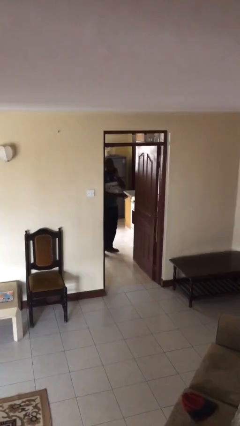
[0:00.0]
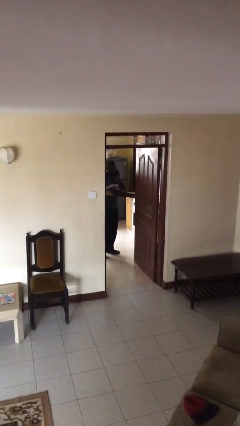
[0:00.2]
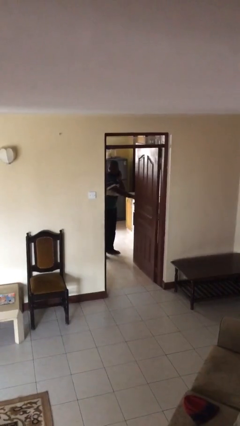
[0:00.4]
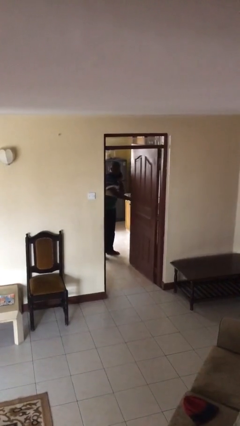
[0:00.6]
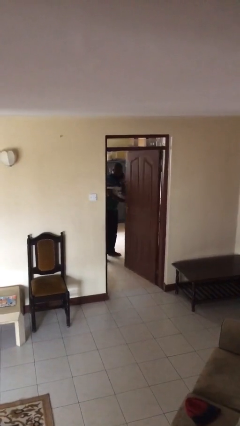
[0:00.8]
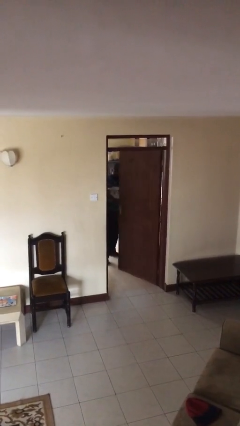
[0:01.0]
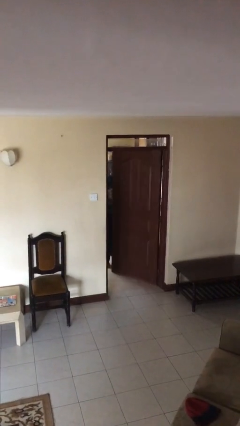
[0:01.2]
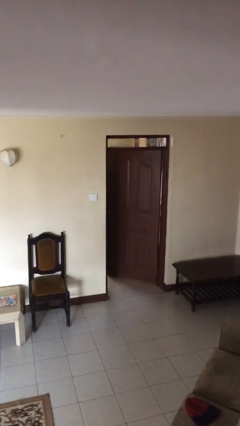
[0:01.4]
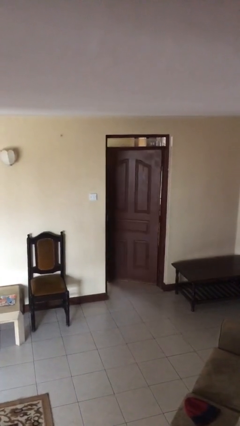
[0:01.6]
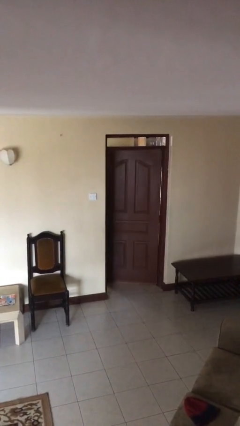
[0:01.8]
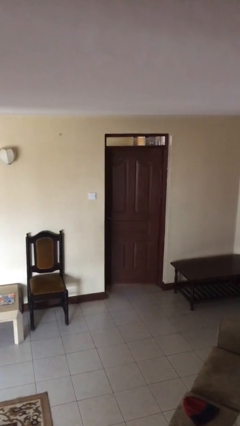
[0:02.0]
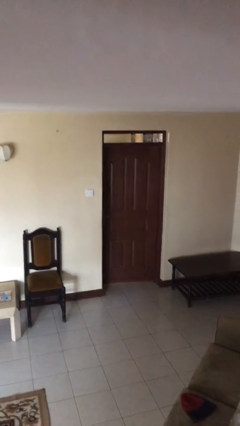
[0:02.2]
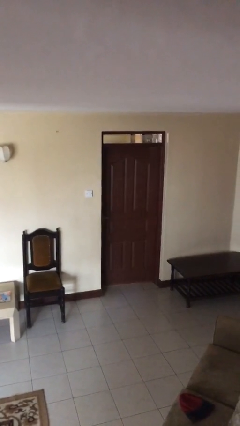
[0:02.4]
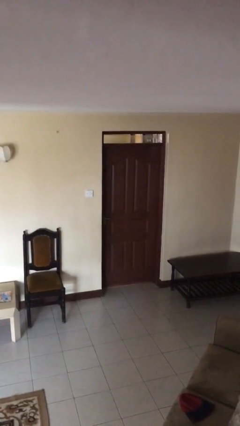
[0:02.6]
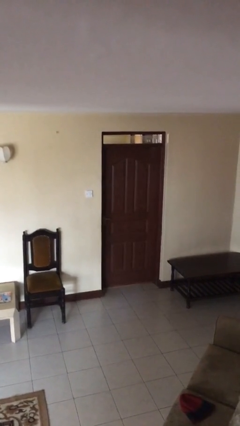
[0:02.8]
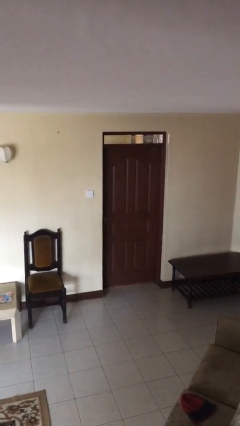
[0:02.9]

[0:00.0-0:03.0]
person closes facility door

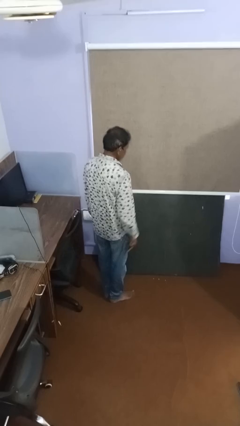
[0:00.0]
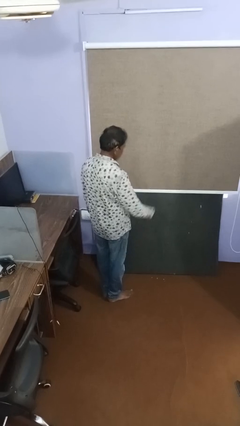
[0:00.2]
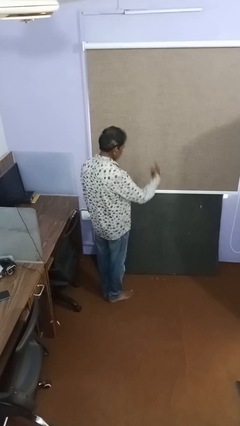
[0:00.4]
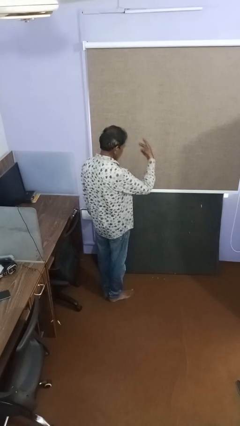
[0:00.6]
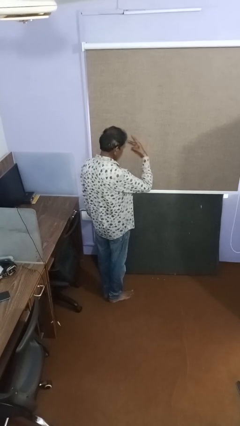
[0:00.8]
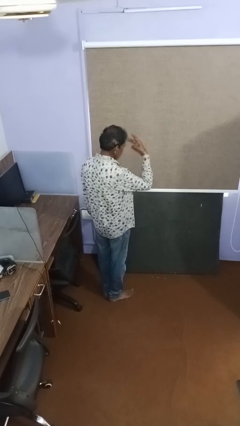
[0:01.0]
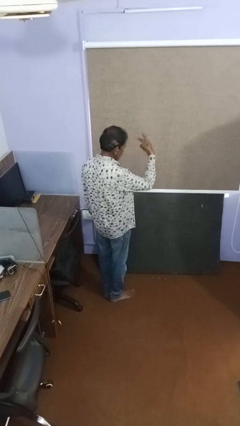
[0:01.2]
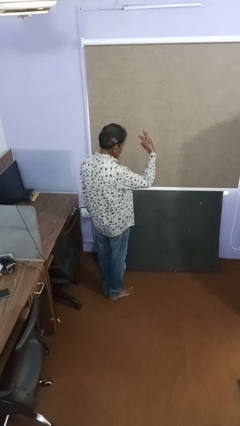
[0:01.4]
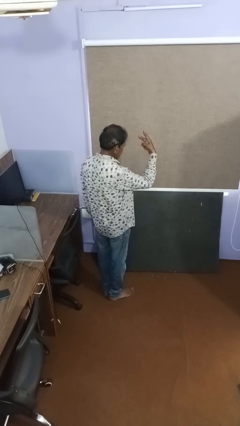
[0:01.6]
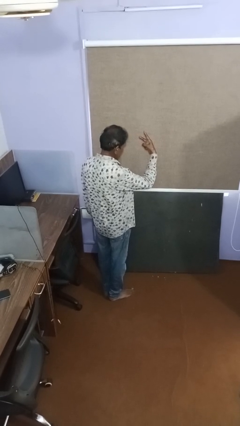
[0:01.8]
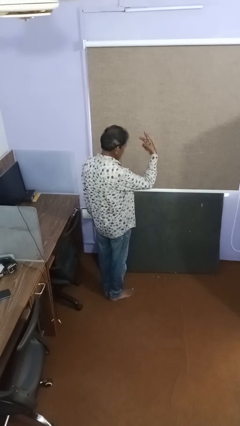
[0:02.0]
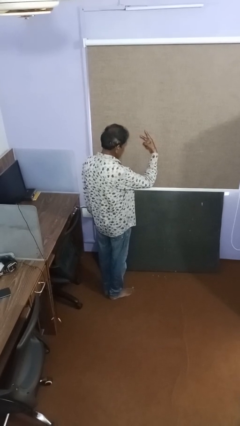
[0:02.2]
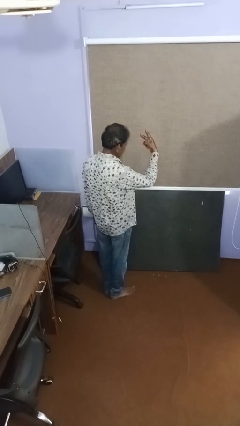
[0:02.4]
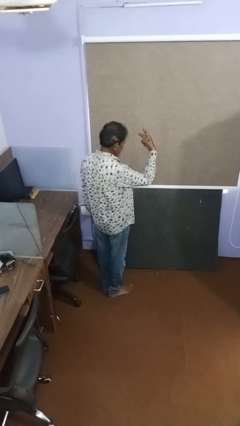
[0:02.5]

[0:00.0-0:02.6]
person gestures peace

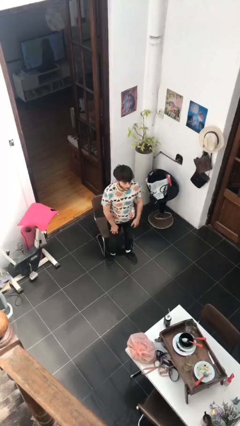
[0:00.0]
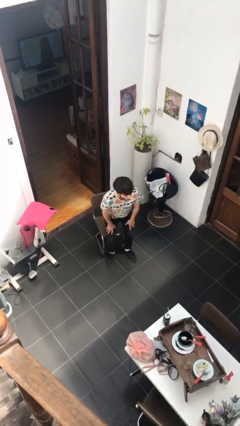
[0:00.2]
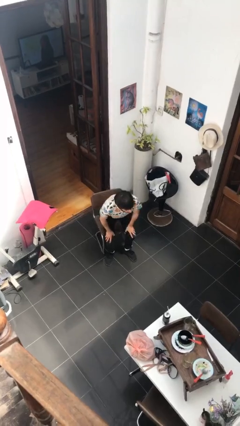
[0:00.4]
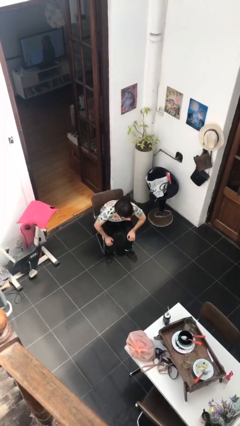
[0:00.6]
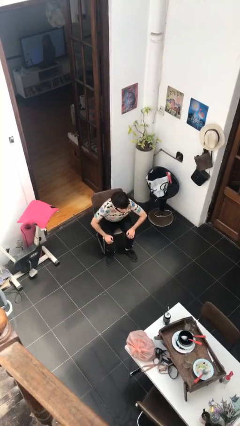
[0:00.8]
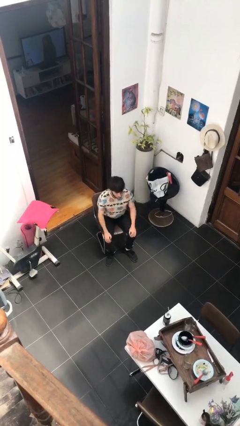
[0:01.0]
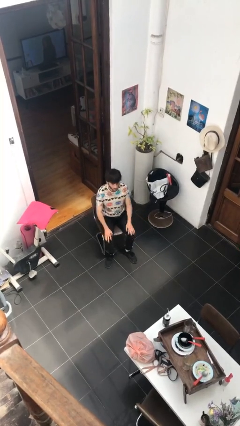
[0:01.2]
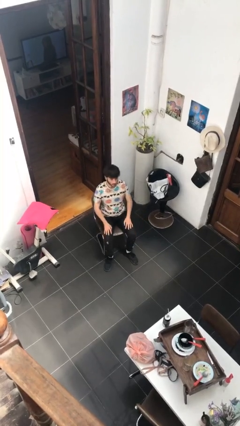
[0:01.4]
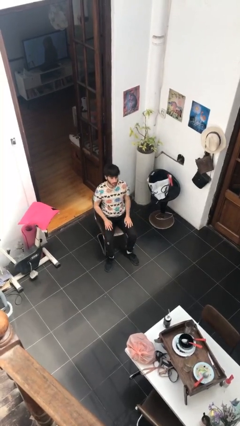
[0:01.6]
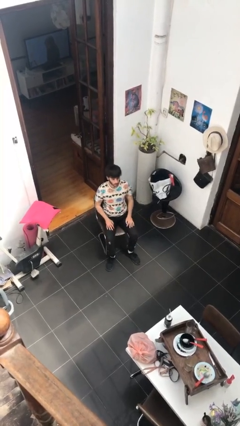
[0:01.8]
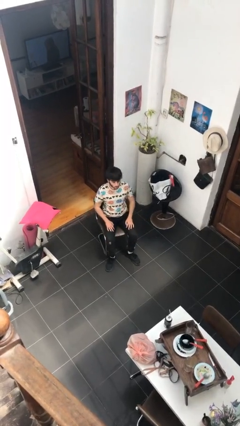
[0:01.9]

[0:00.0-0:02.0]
person sits down

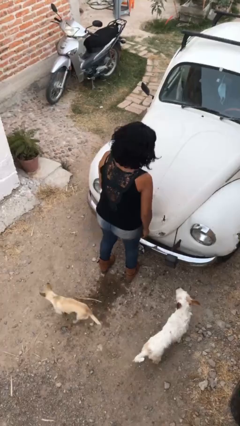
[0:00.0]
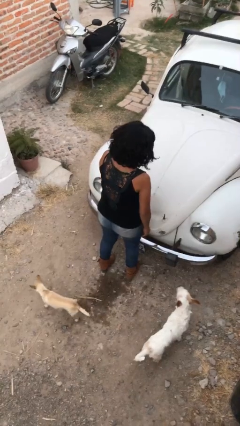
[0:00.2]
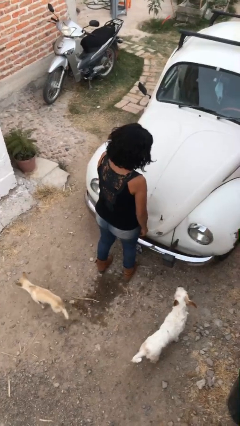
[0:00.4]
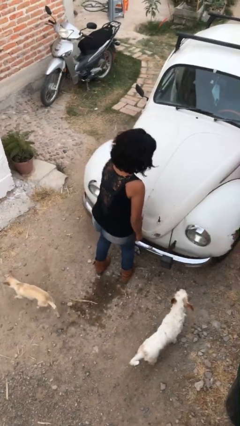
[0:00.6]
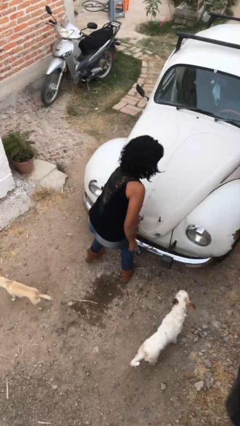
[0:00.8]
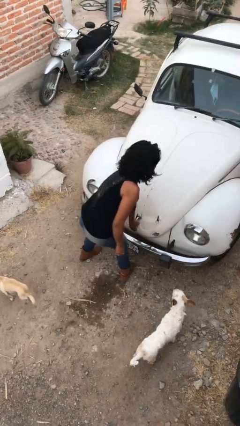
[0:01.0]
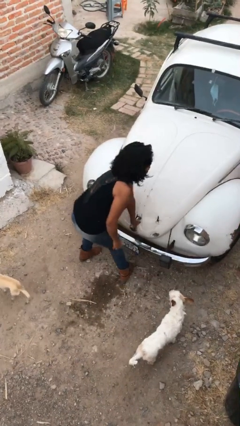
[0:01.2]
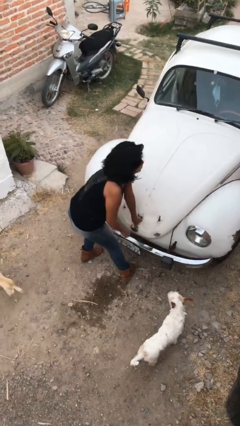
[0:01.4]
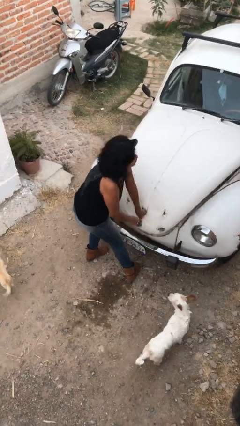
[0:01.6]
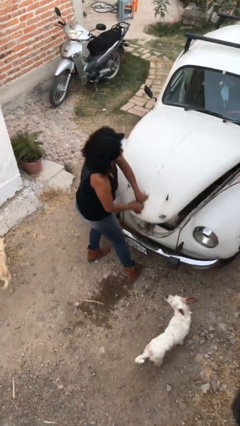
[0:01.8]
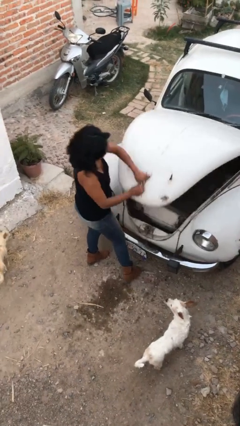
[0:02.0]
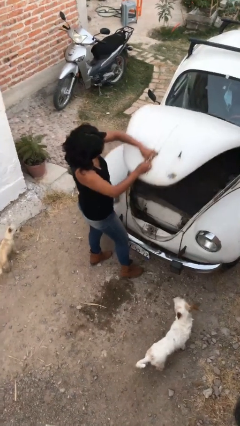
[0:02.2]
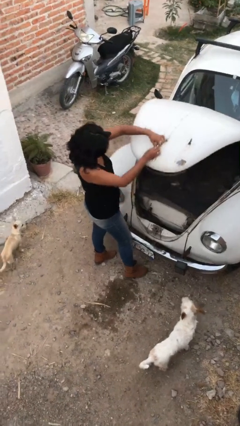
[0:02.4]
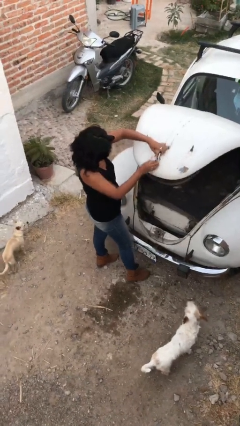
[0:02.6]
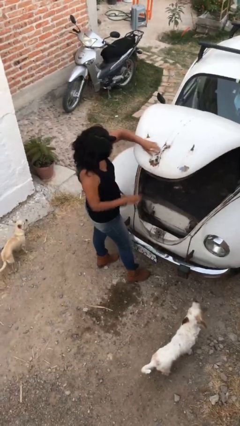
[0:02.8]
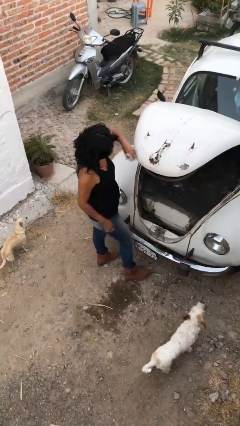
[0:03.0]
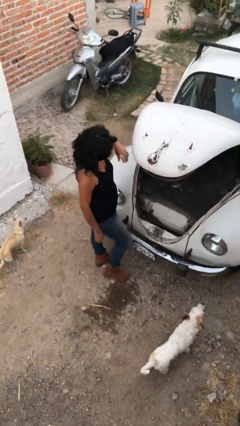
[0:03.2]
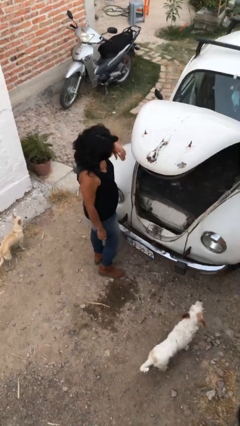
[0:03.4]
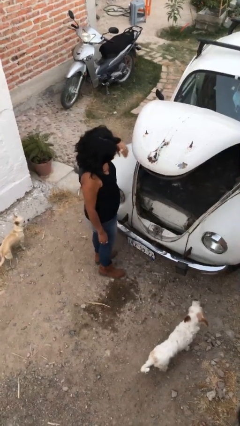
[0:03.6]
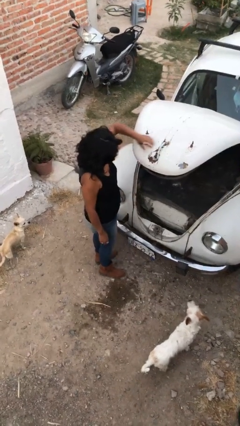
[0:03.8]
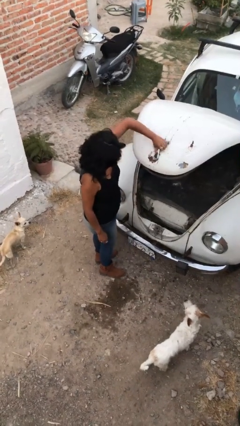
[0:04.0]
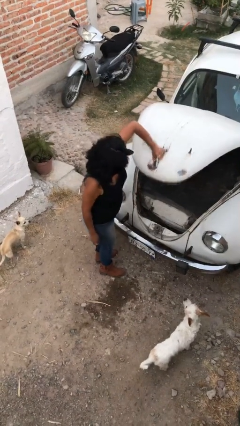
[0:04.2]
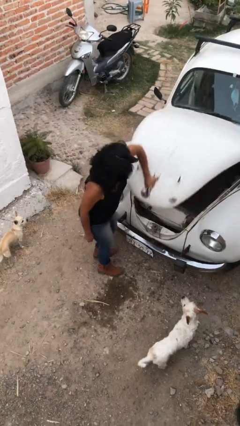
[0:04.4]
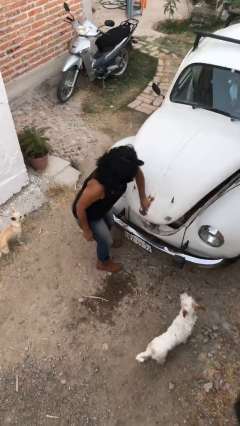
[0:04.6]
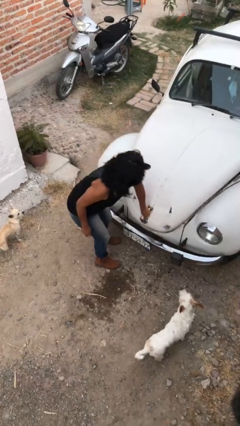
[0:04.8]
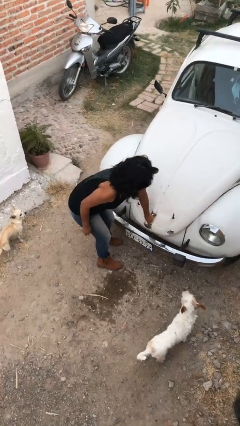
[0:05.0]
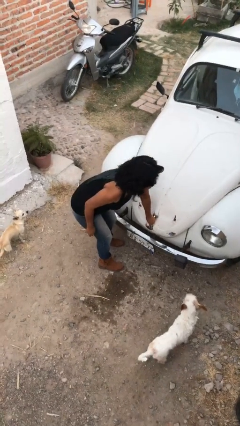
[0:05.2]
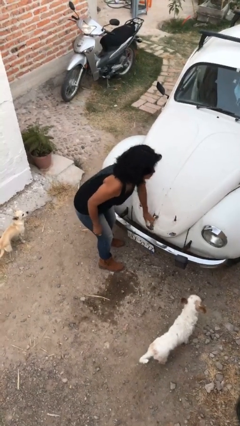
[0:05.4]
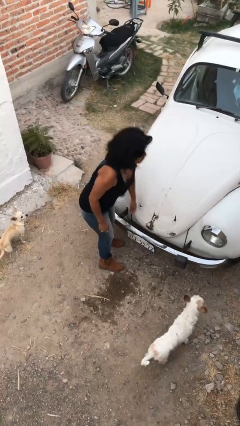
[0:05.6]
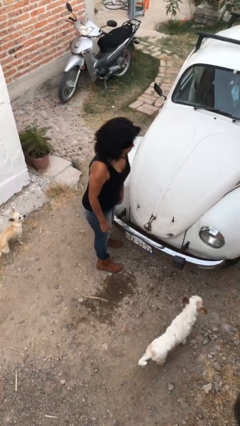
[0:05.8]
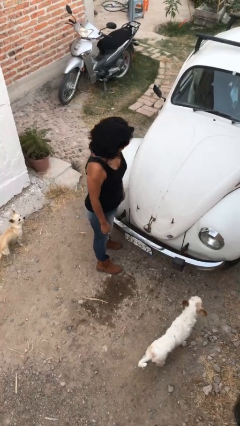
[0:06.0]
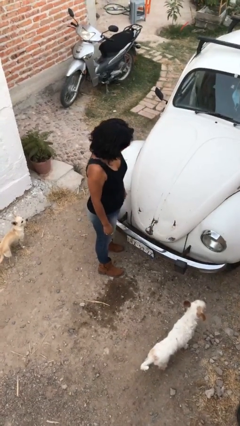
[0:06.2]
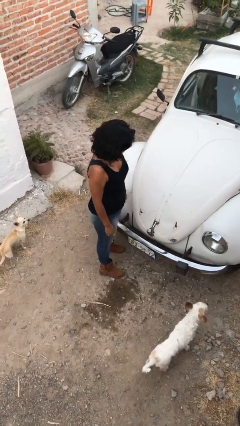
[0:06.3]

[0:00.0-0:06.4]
person opens car trunk

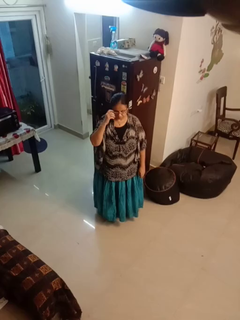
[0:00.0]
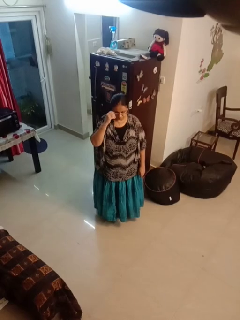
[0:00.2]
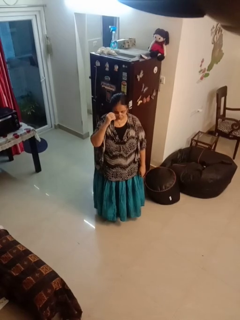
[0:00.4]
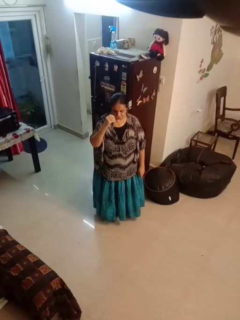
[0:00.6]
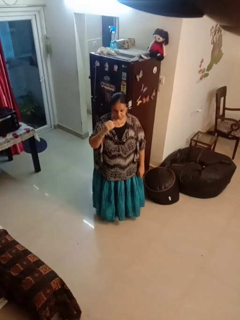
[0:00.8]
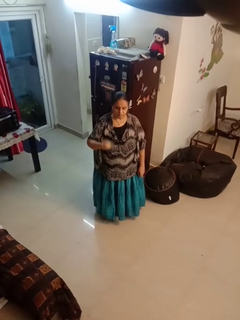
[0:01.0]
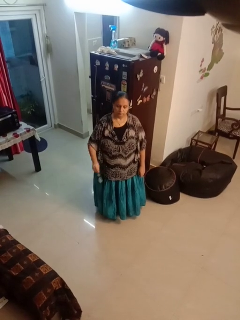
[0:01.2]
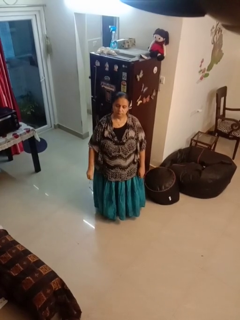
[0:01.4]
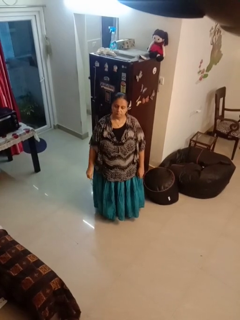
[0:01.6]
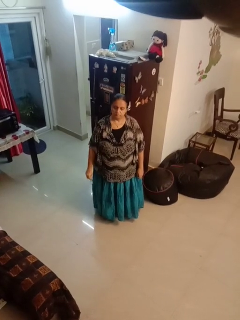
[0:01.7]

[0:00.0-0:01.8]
person takes off glasses

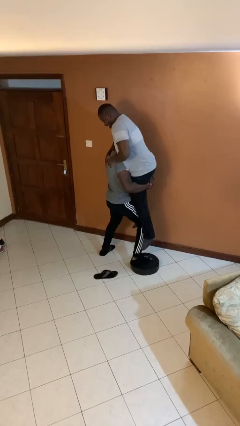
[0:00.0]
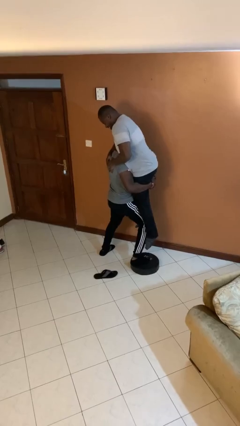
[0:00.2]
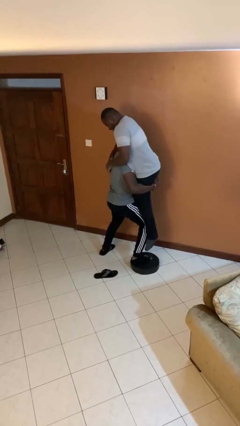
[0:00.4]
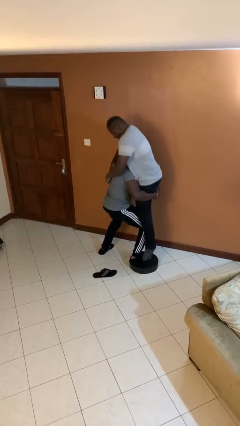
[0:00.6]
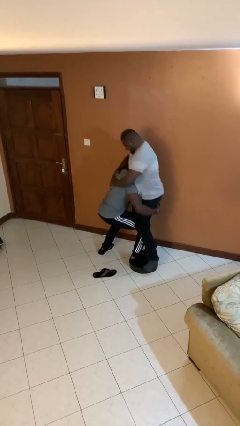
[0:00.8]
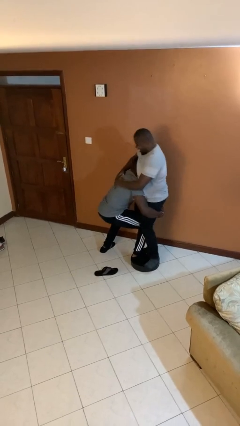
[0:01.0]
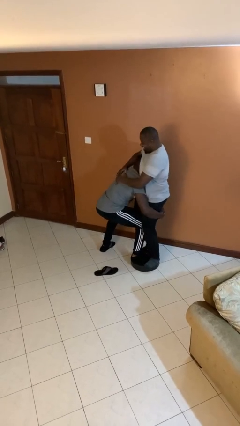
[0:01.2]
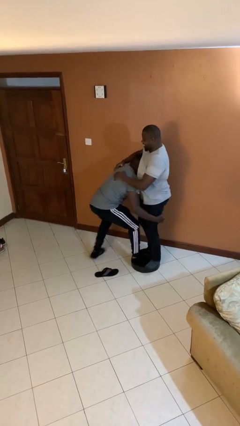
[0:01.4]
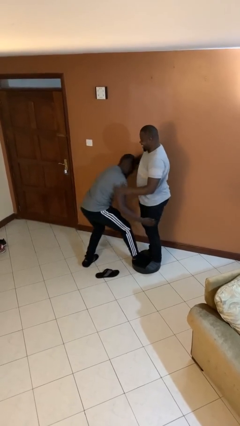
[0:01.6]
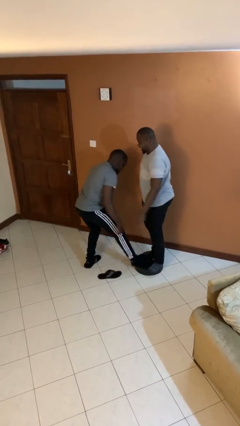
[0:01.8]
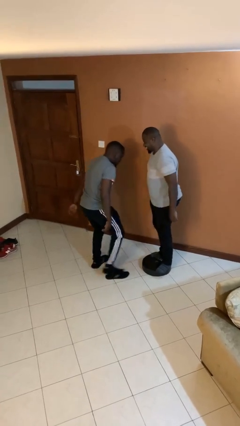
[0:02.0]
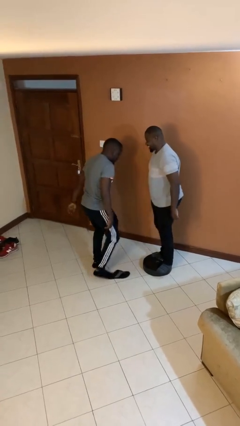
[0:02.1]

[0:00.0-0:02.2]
person puts down person
